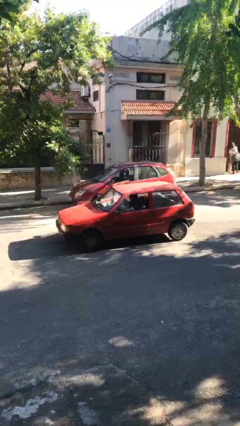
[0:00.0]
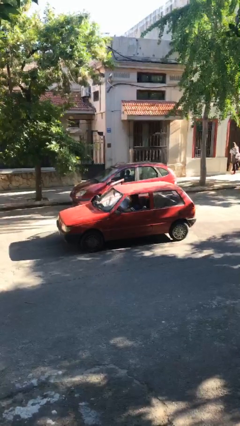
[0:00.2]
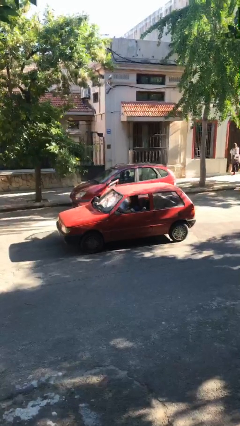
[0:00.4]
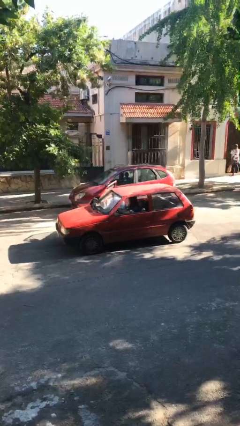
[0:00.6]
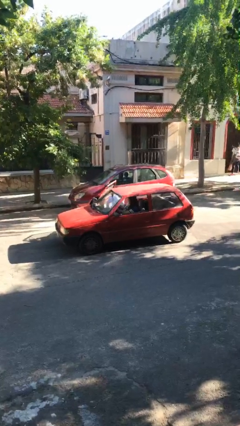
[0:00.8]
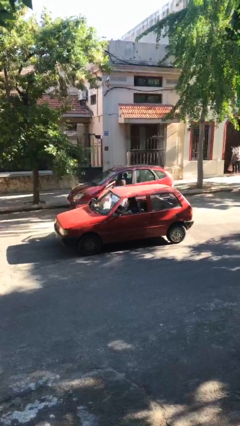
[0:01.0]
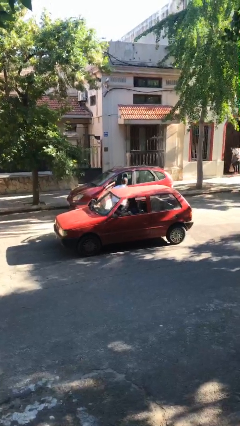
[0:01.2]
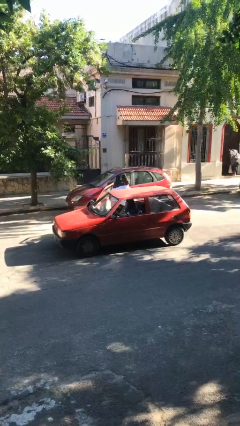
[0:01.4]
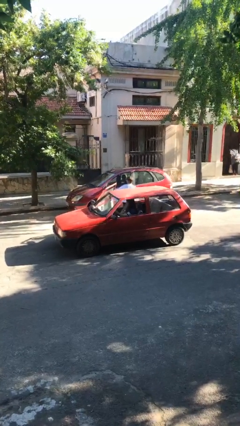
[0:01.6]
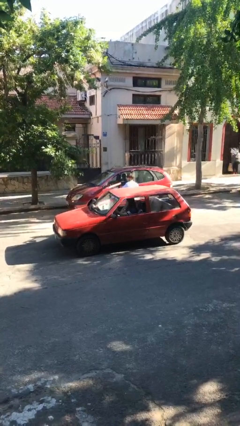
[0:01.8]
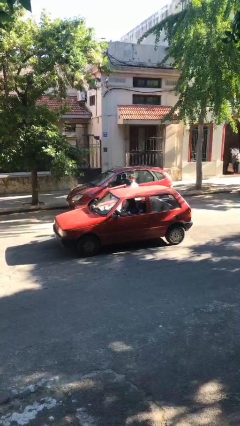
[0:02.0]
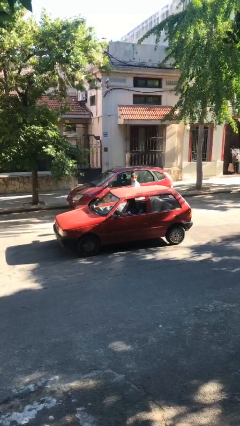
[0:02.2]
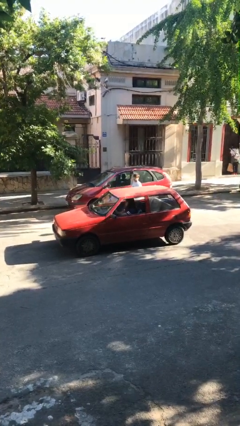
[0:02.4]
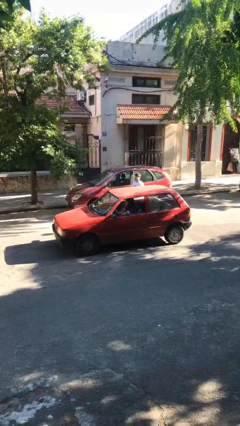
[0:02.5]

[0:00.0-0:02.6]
car drops off person

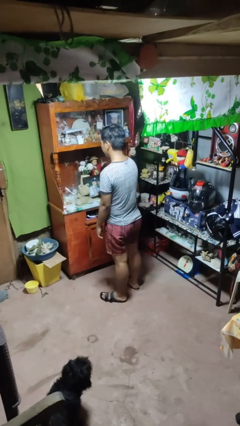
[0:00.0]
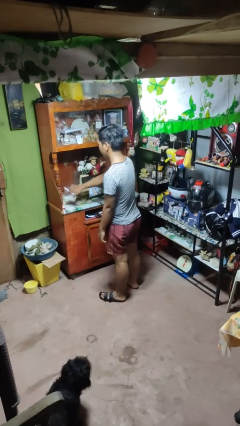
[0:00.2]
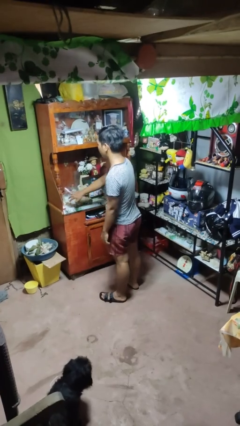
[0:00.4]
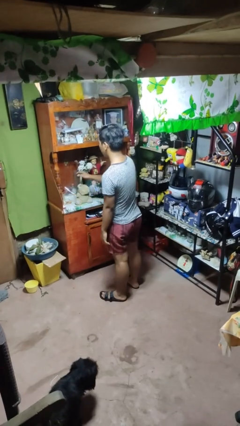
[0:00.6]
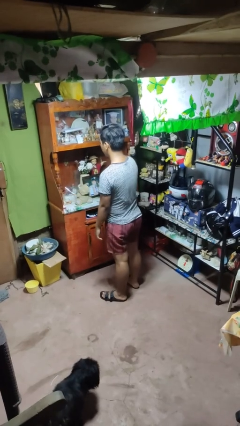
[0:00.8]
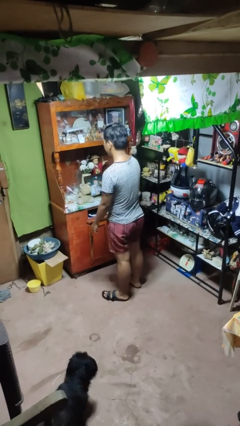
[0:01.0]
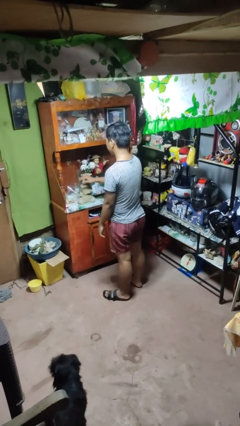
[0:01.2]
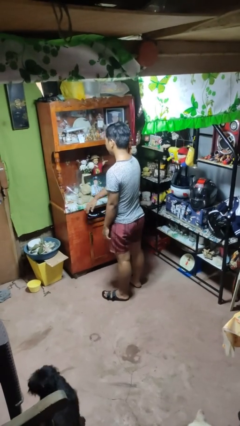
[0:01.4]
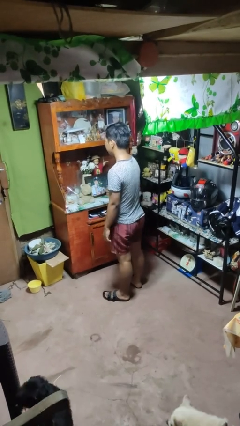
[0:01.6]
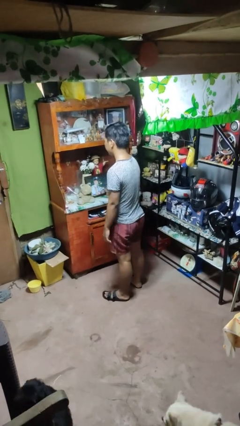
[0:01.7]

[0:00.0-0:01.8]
person waves hand over object

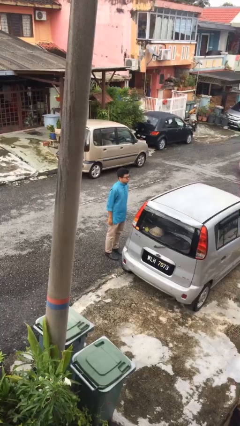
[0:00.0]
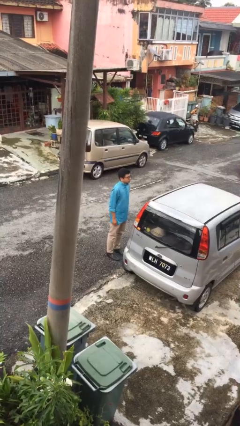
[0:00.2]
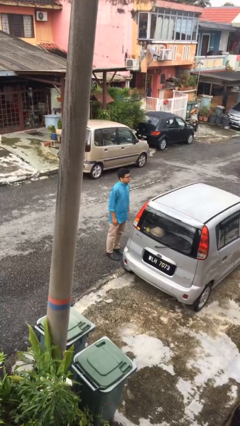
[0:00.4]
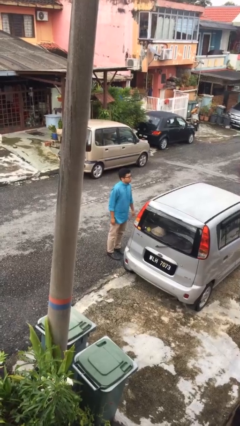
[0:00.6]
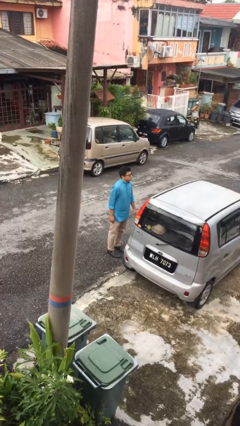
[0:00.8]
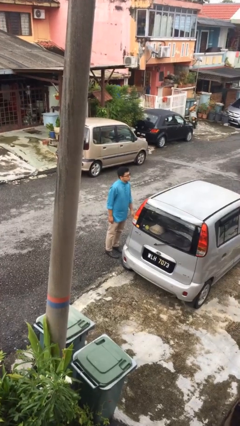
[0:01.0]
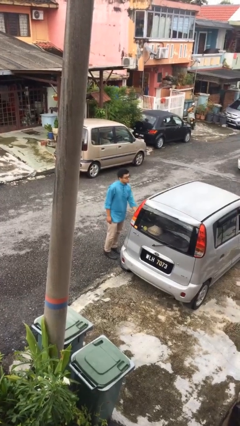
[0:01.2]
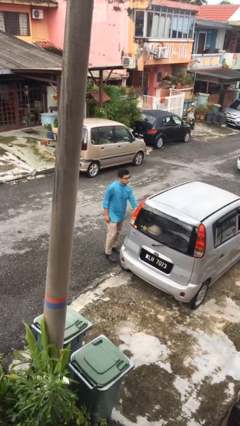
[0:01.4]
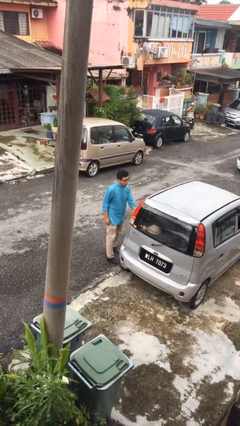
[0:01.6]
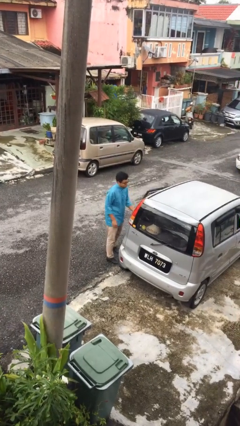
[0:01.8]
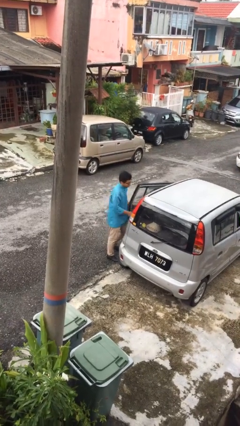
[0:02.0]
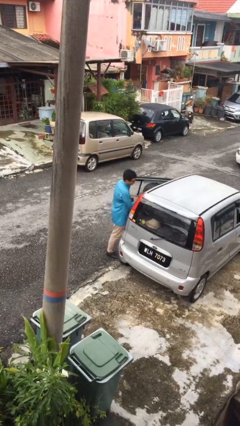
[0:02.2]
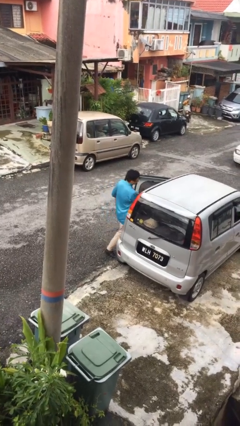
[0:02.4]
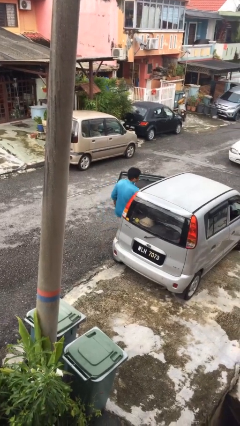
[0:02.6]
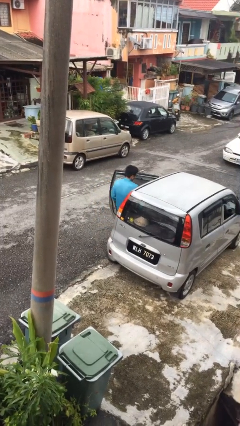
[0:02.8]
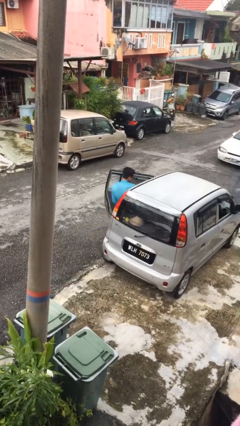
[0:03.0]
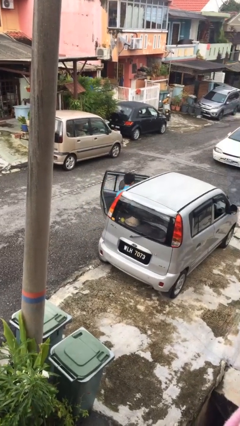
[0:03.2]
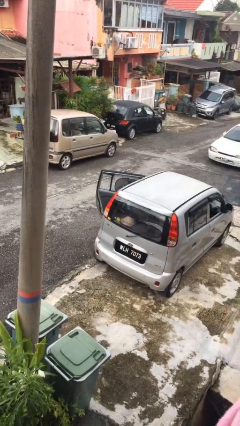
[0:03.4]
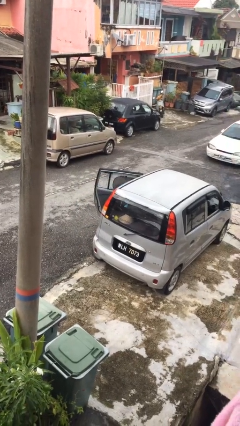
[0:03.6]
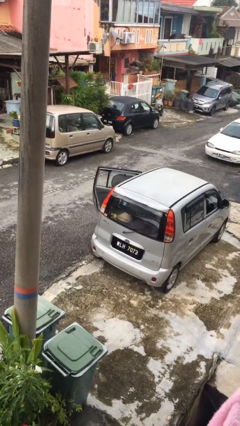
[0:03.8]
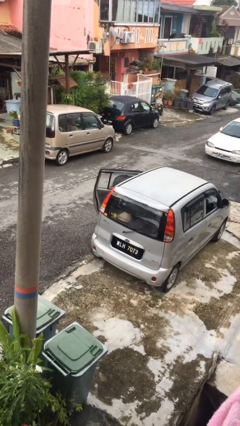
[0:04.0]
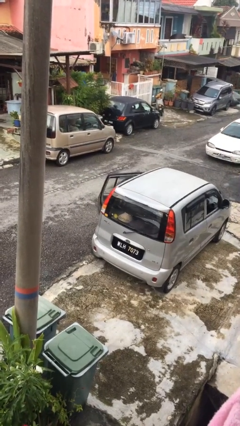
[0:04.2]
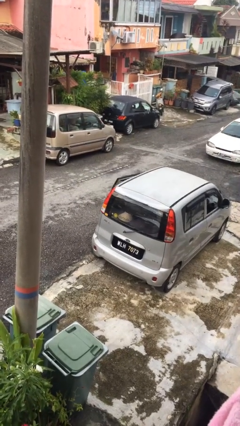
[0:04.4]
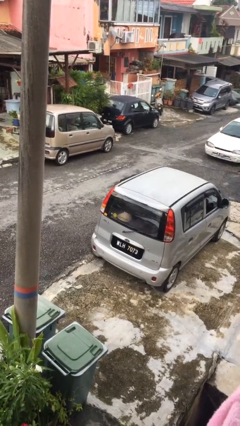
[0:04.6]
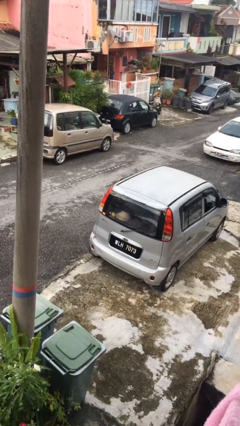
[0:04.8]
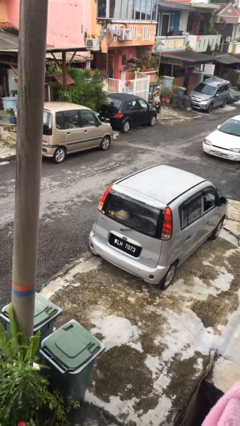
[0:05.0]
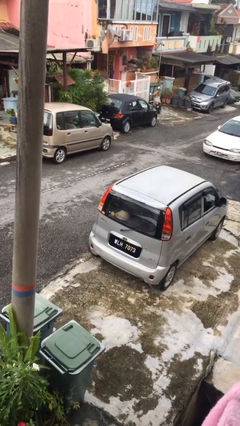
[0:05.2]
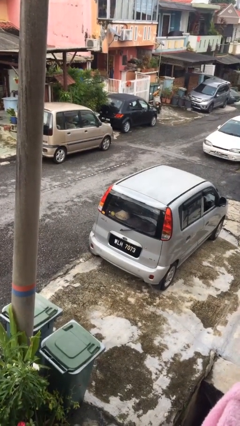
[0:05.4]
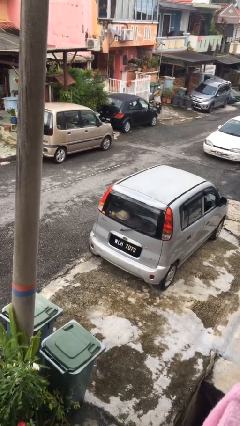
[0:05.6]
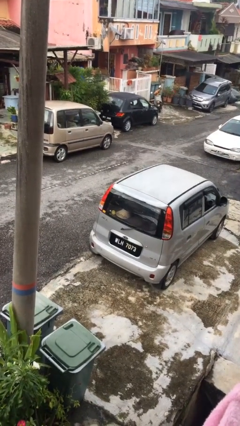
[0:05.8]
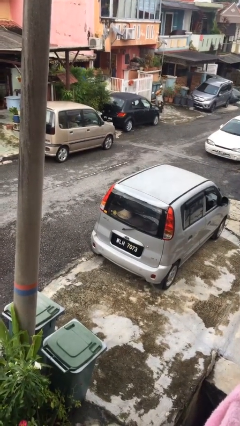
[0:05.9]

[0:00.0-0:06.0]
person enters car

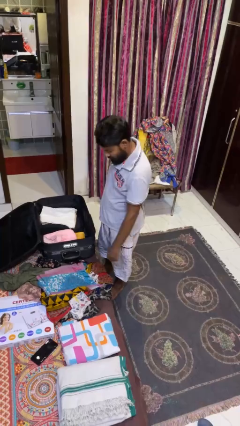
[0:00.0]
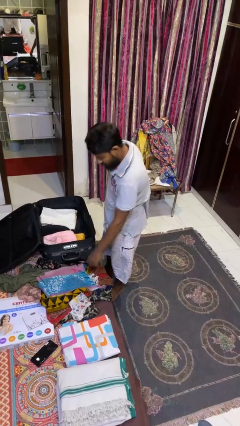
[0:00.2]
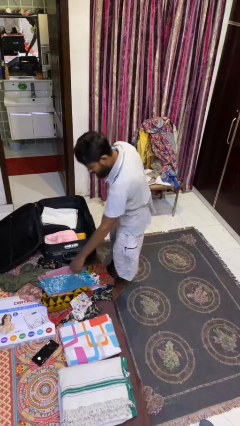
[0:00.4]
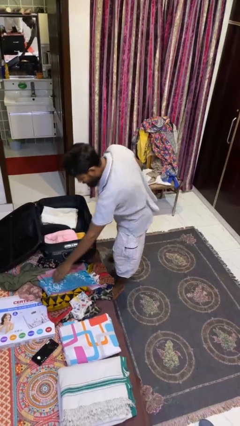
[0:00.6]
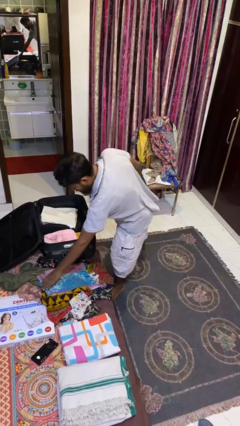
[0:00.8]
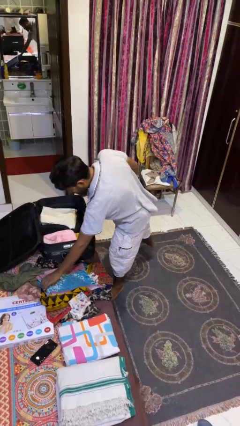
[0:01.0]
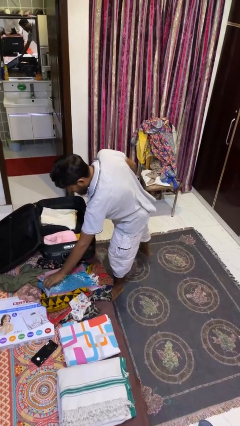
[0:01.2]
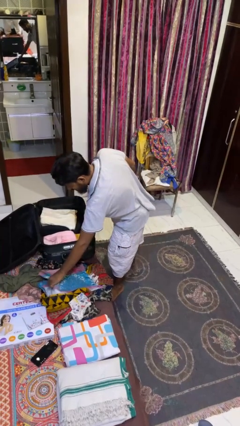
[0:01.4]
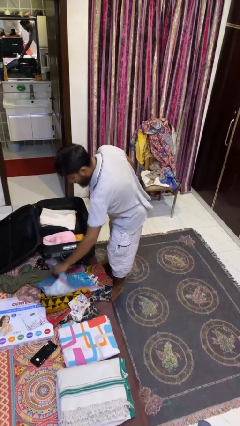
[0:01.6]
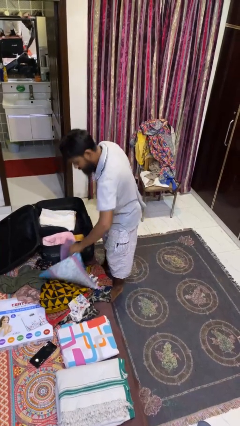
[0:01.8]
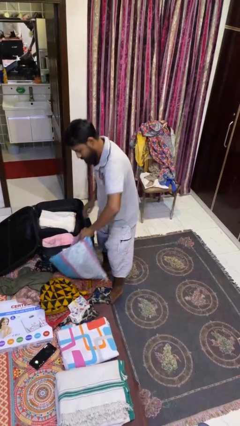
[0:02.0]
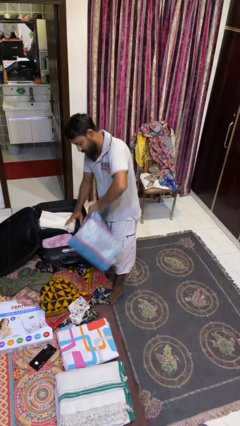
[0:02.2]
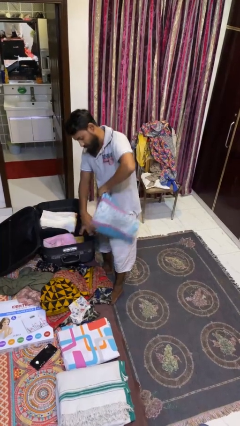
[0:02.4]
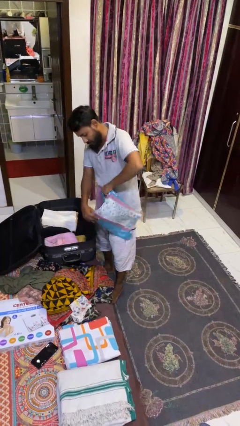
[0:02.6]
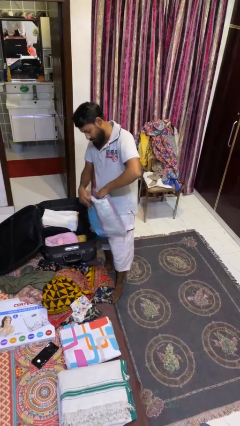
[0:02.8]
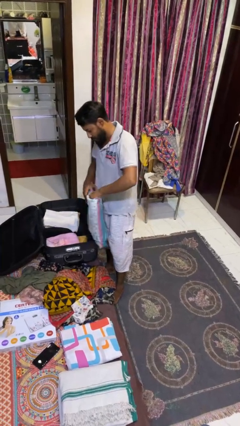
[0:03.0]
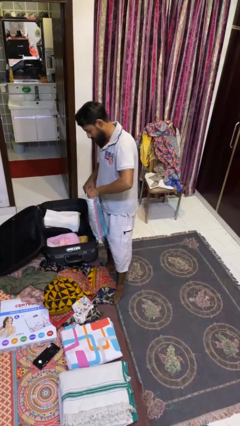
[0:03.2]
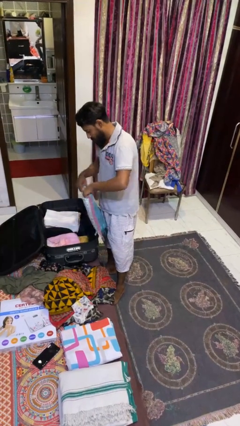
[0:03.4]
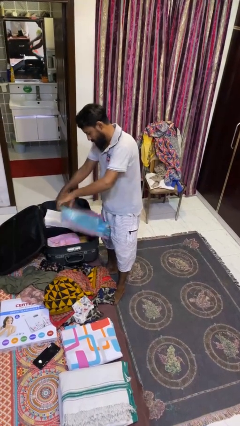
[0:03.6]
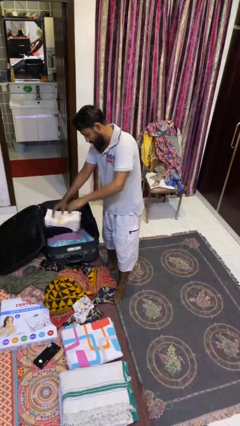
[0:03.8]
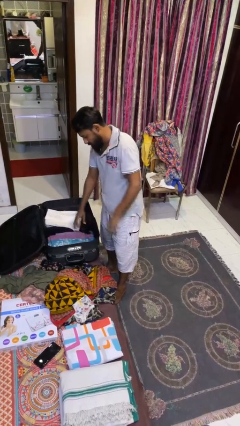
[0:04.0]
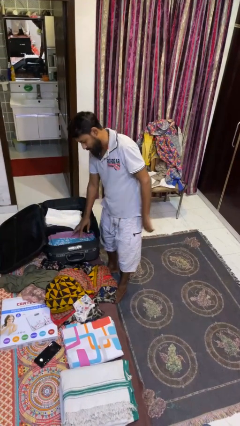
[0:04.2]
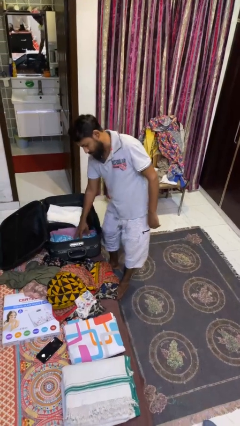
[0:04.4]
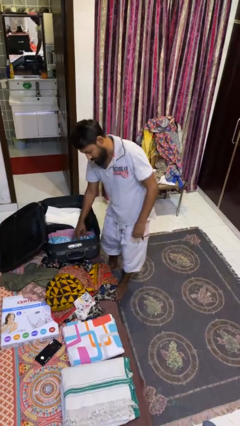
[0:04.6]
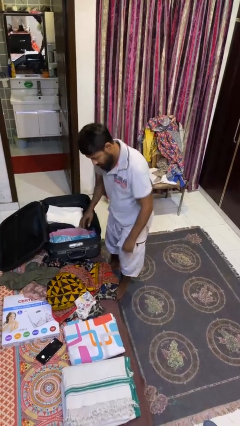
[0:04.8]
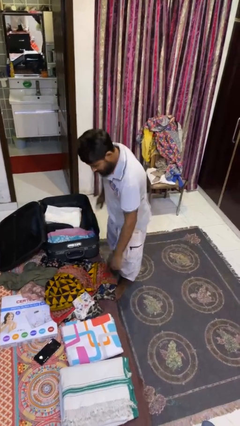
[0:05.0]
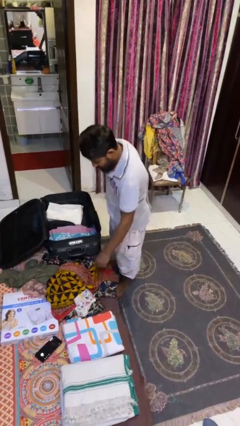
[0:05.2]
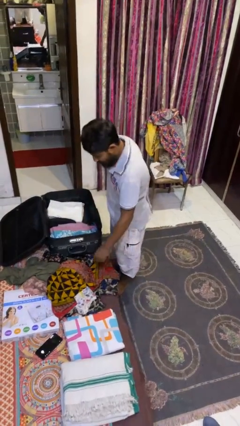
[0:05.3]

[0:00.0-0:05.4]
person loads clothes into suitcase

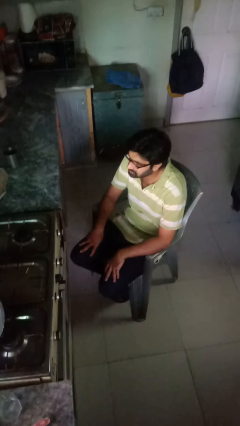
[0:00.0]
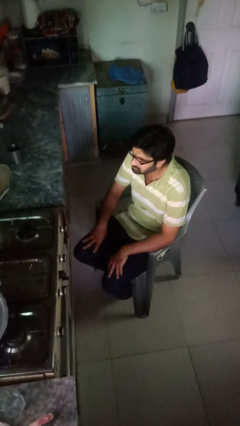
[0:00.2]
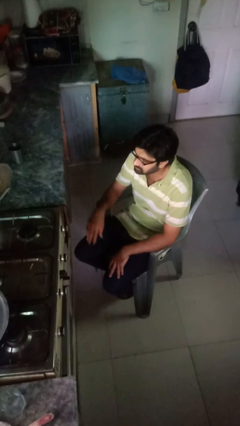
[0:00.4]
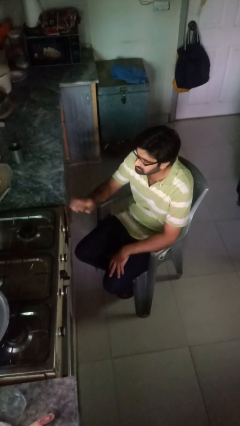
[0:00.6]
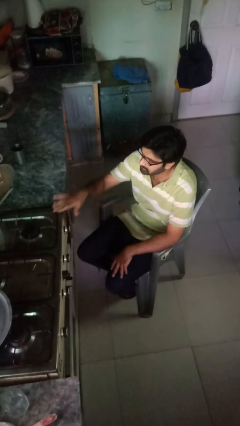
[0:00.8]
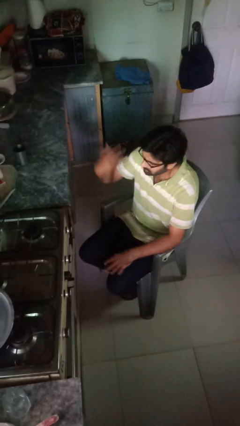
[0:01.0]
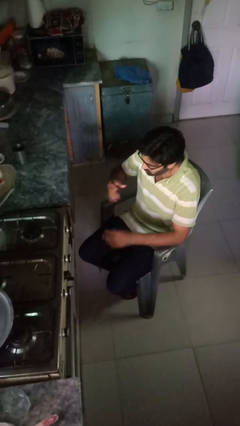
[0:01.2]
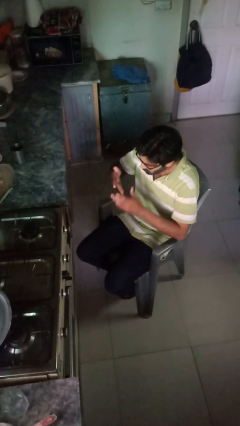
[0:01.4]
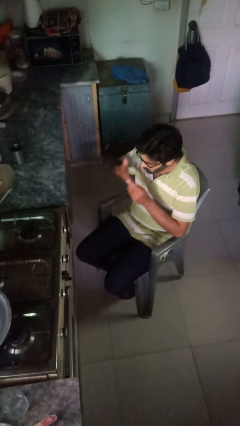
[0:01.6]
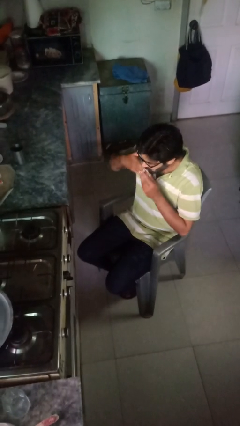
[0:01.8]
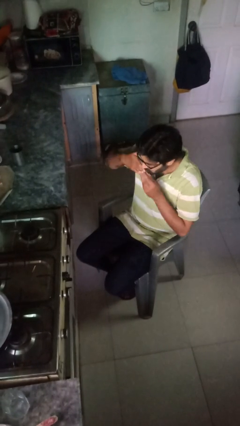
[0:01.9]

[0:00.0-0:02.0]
person burns hand
